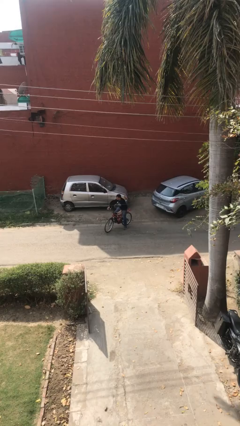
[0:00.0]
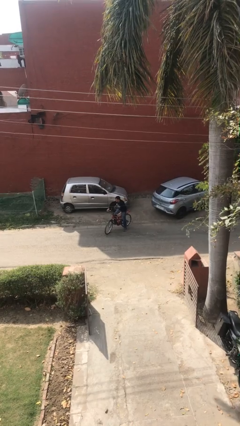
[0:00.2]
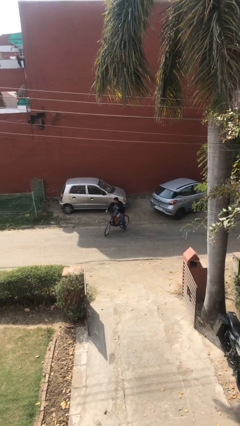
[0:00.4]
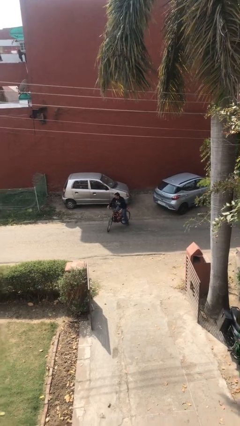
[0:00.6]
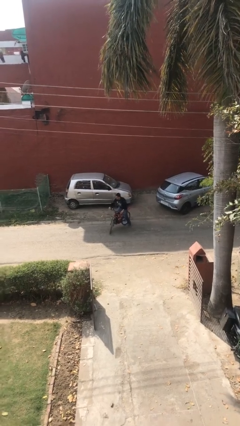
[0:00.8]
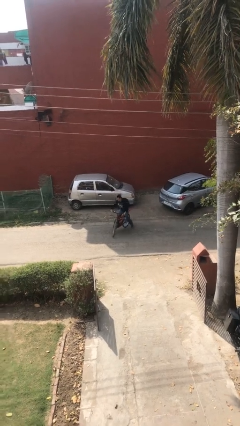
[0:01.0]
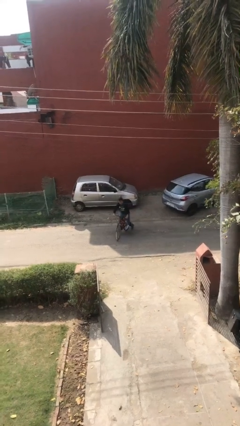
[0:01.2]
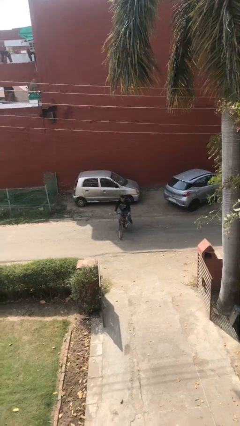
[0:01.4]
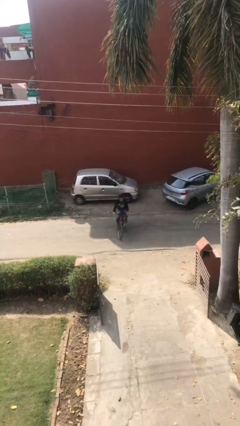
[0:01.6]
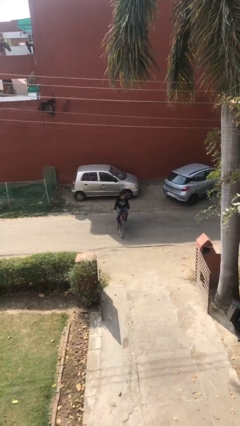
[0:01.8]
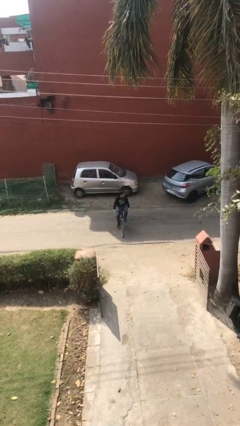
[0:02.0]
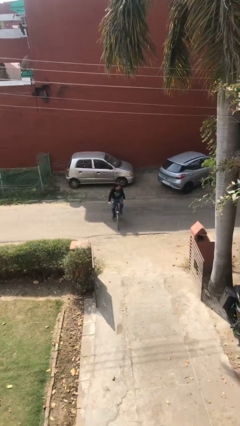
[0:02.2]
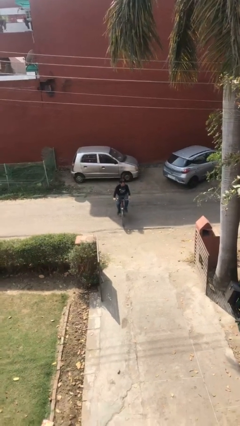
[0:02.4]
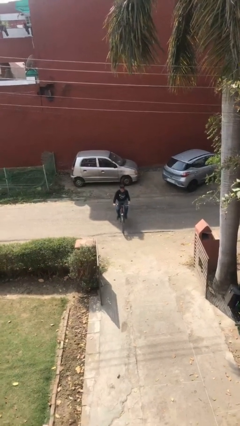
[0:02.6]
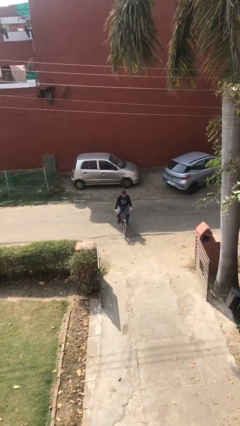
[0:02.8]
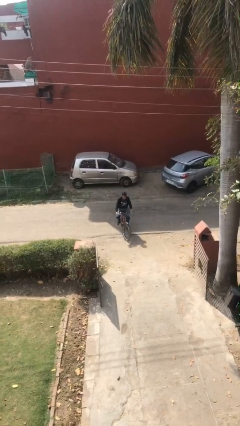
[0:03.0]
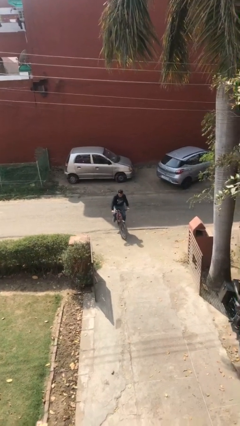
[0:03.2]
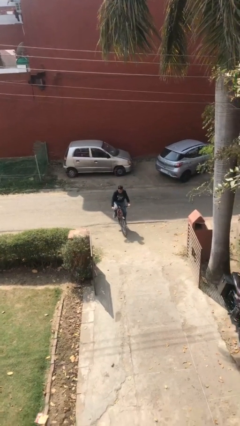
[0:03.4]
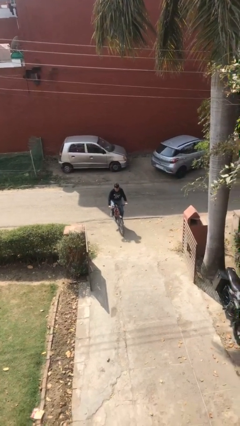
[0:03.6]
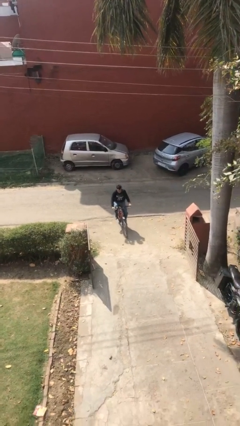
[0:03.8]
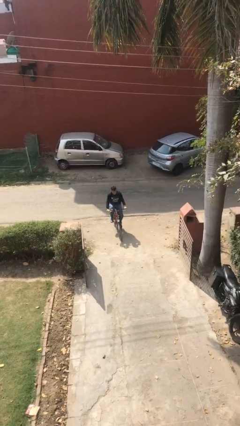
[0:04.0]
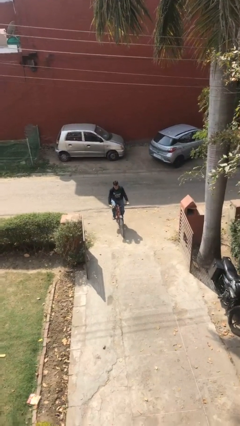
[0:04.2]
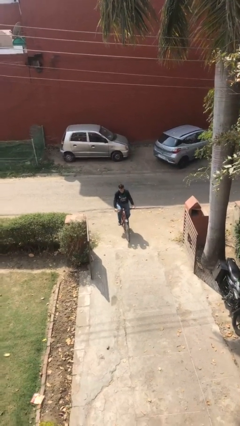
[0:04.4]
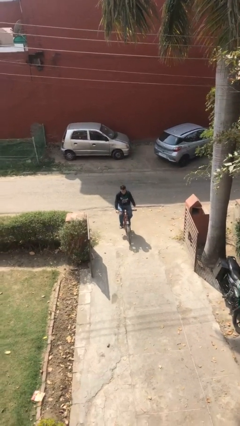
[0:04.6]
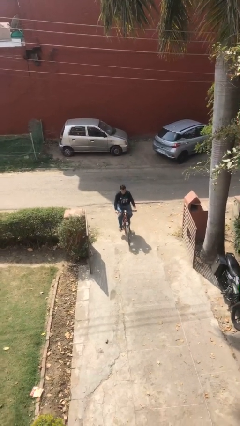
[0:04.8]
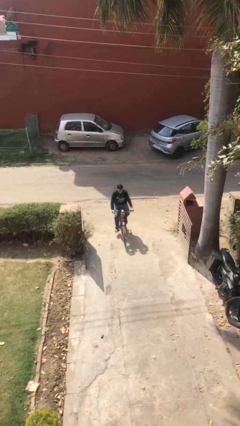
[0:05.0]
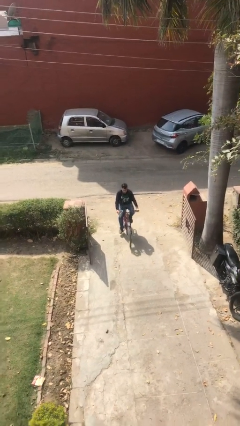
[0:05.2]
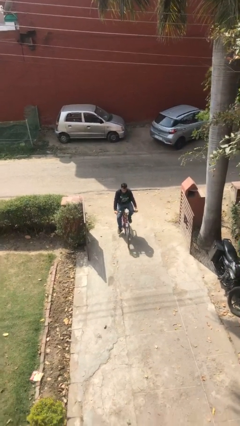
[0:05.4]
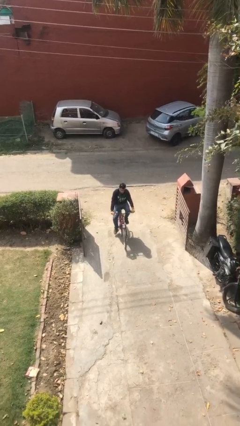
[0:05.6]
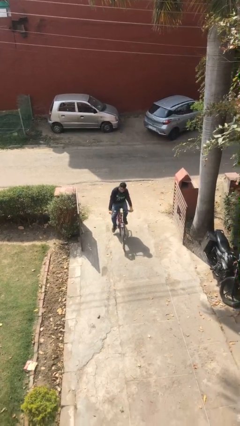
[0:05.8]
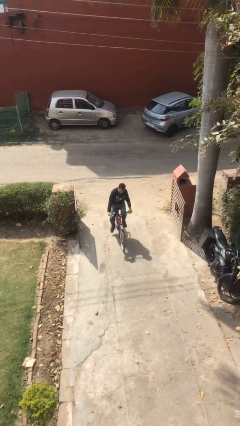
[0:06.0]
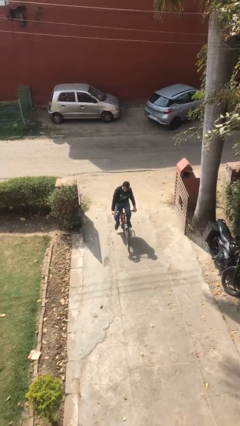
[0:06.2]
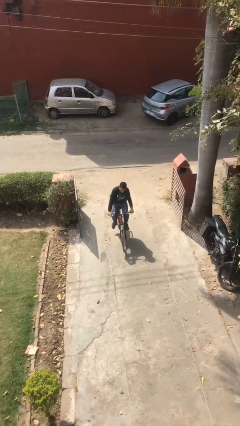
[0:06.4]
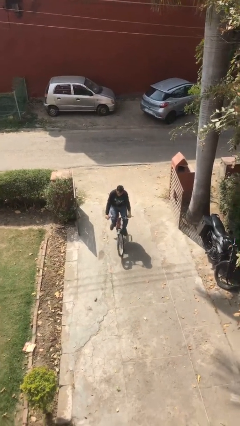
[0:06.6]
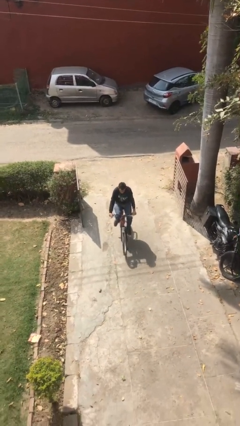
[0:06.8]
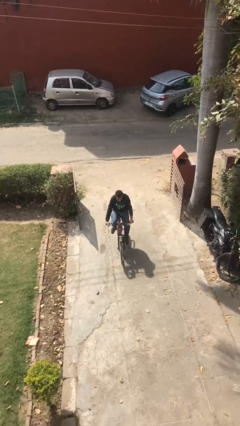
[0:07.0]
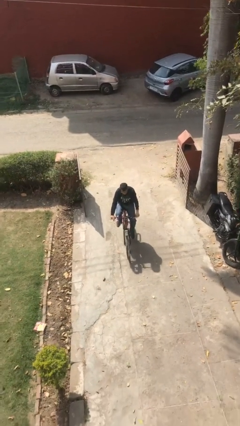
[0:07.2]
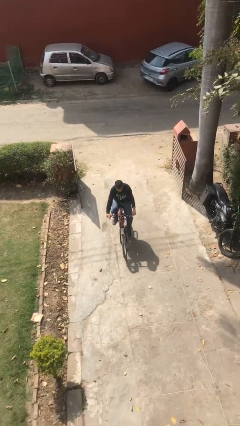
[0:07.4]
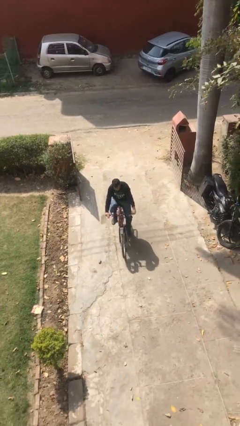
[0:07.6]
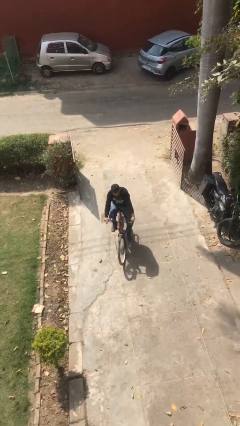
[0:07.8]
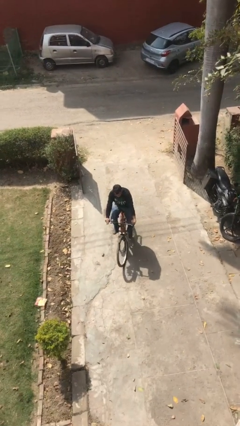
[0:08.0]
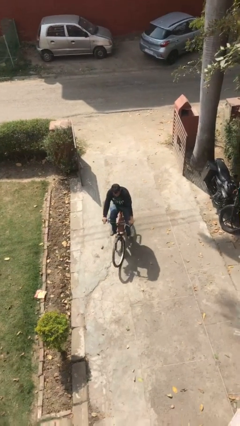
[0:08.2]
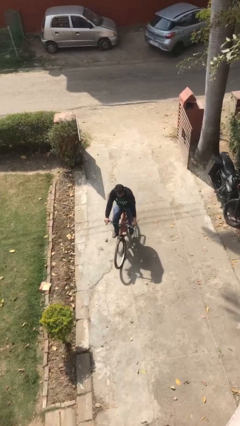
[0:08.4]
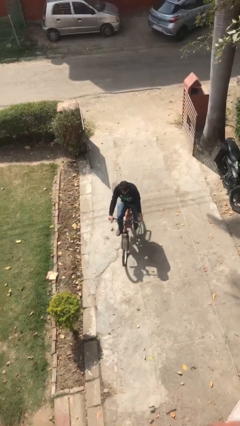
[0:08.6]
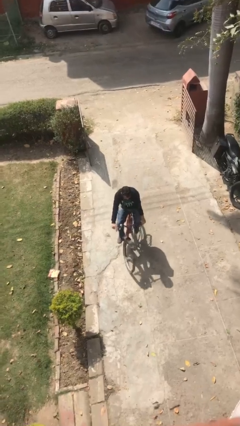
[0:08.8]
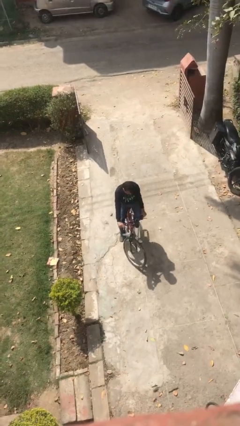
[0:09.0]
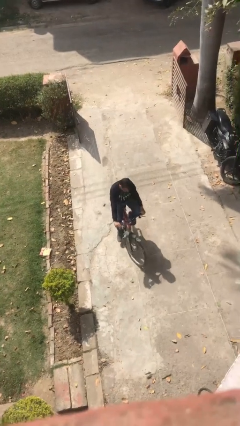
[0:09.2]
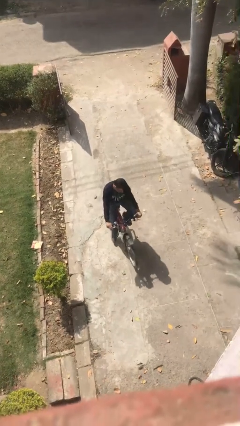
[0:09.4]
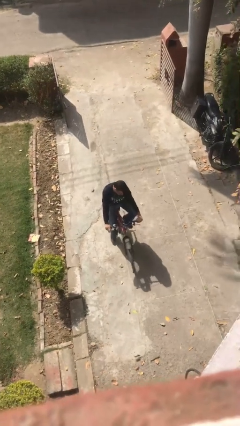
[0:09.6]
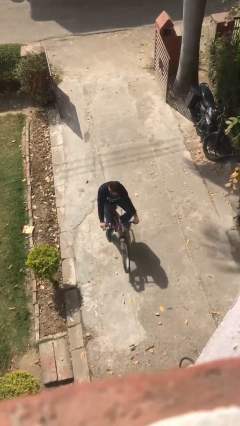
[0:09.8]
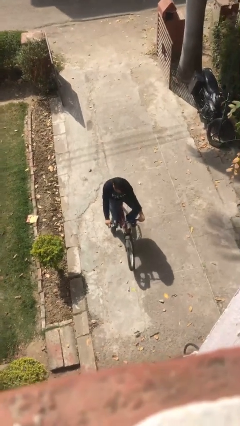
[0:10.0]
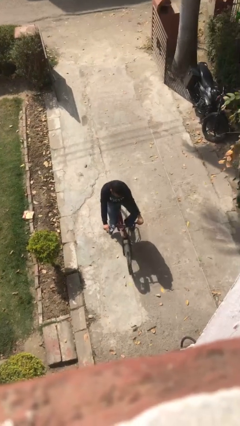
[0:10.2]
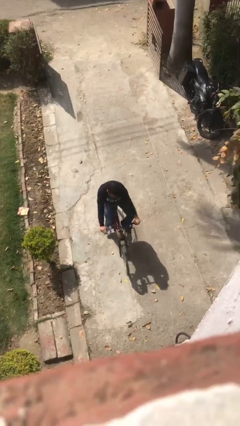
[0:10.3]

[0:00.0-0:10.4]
person rides bicycle

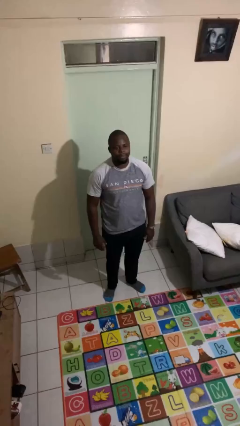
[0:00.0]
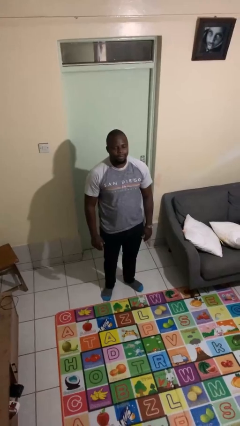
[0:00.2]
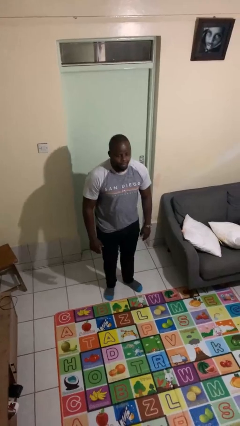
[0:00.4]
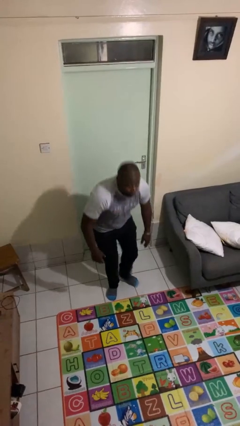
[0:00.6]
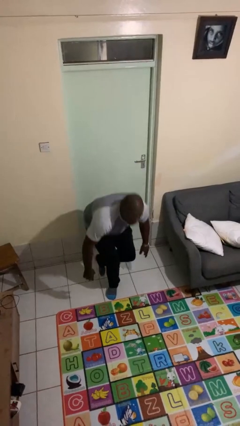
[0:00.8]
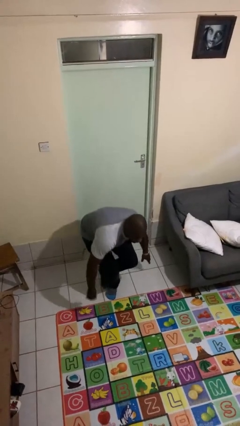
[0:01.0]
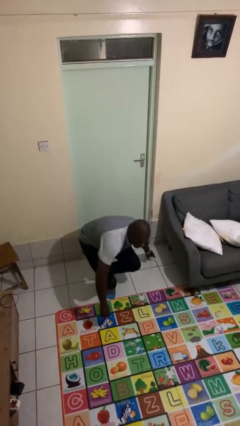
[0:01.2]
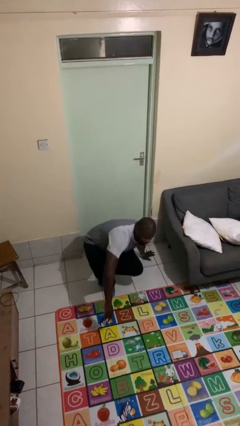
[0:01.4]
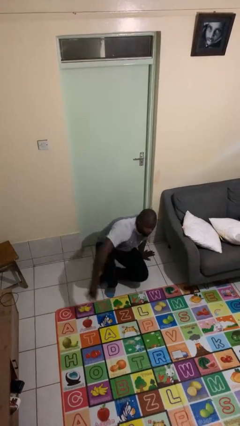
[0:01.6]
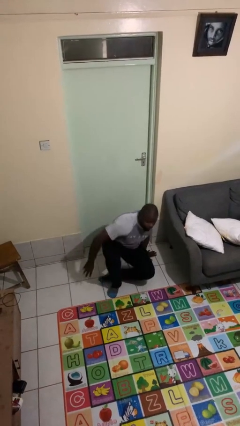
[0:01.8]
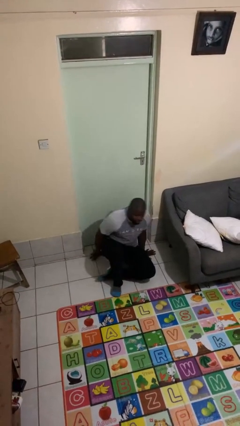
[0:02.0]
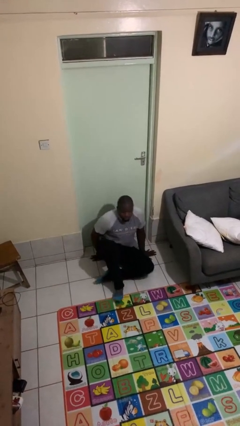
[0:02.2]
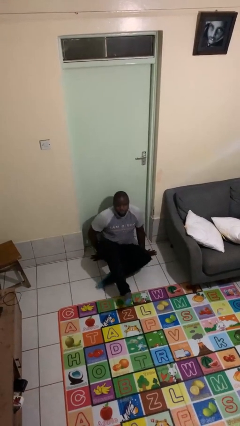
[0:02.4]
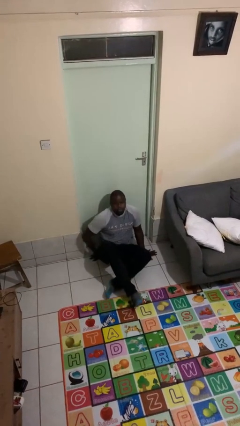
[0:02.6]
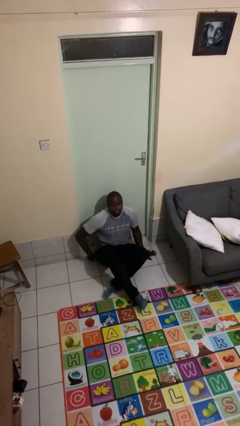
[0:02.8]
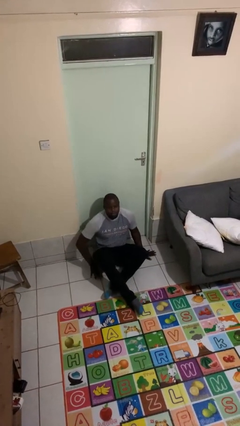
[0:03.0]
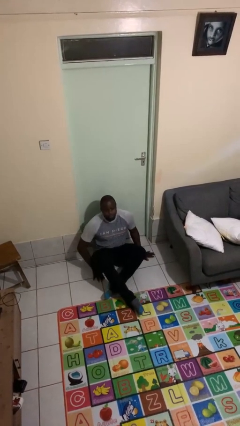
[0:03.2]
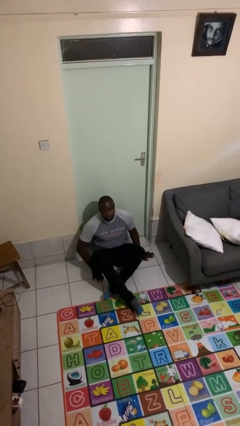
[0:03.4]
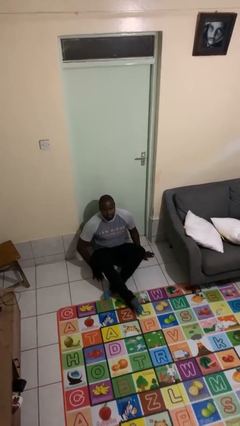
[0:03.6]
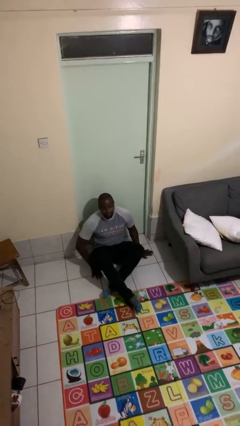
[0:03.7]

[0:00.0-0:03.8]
person sits crisscross

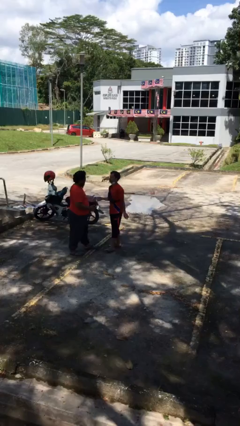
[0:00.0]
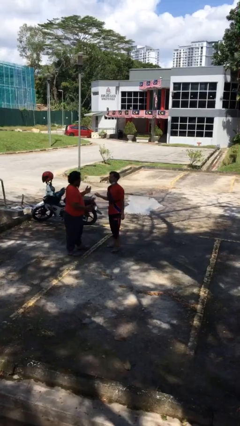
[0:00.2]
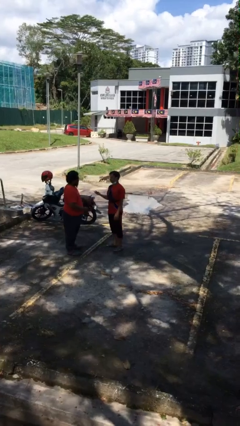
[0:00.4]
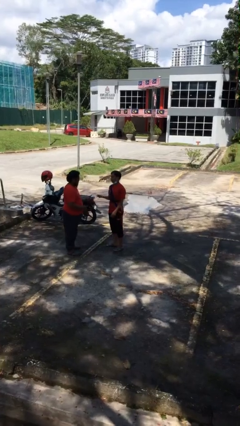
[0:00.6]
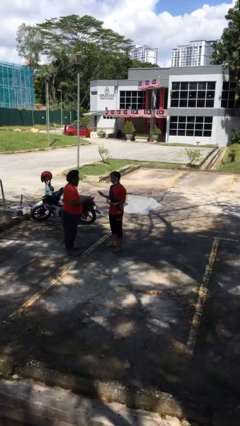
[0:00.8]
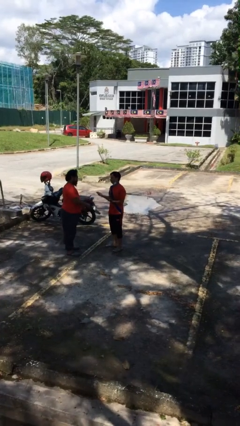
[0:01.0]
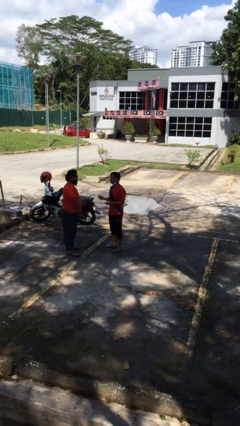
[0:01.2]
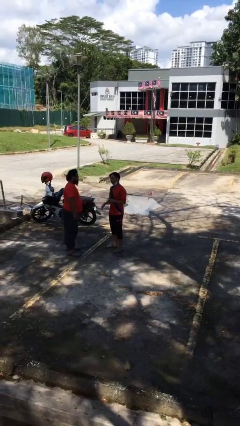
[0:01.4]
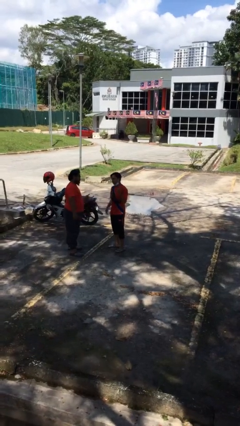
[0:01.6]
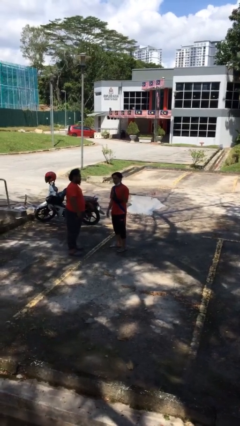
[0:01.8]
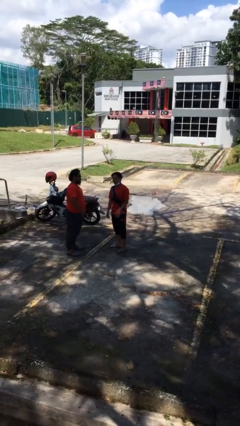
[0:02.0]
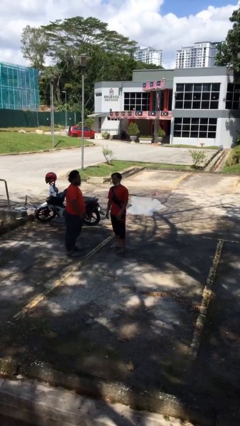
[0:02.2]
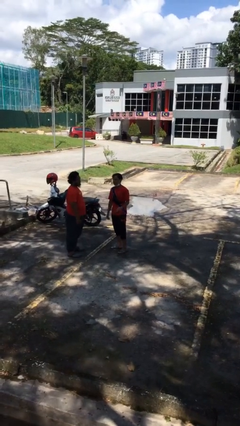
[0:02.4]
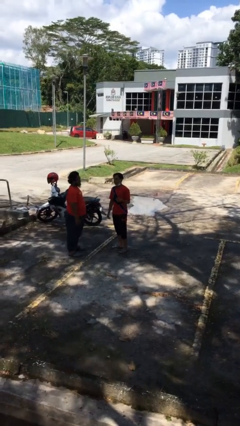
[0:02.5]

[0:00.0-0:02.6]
person talks to person

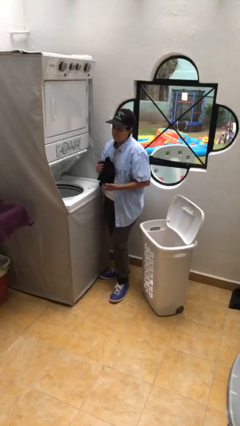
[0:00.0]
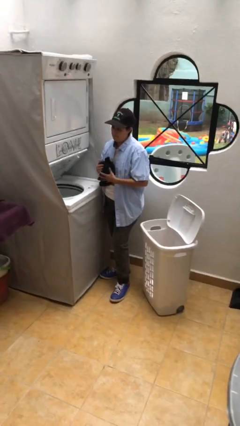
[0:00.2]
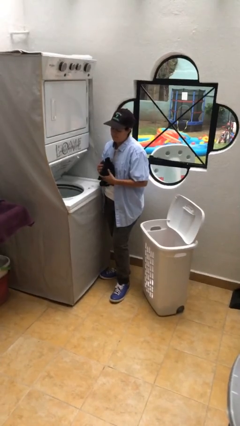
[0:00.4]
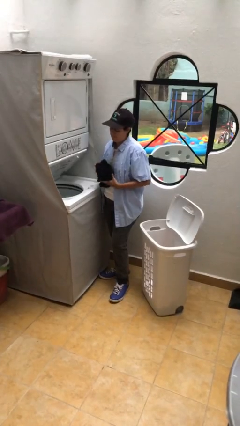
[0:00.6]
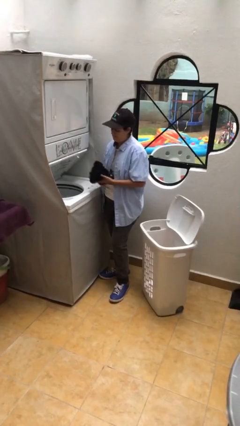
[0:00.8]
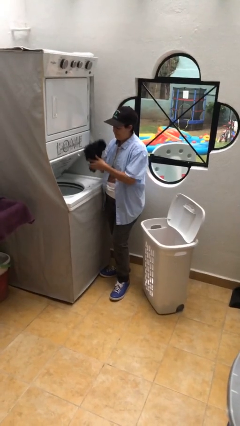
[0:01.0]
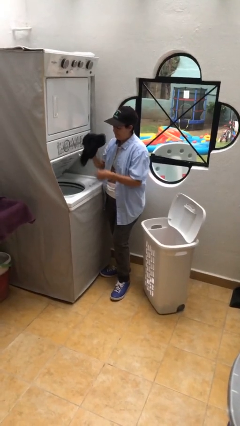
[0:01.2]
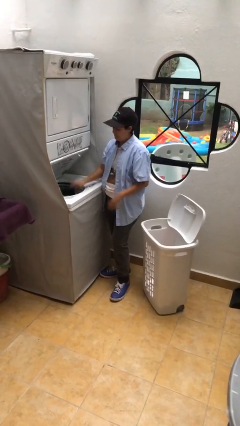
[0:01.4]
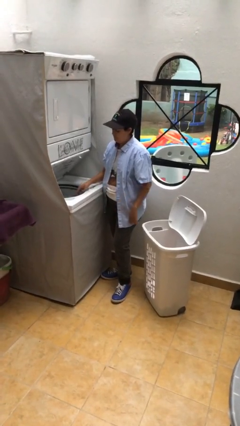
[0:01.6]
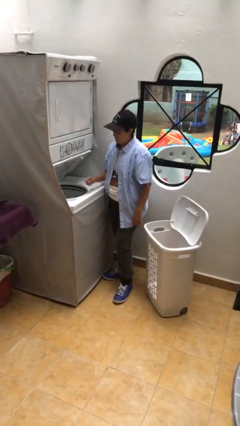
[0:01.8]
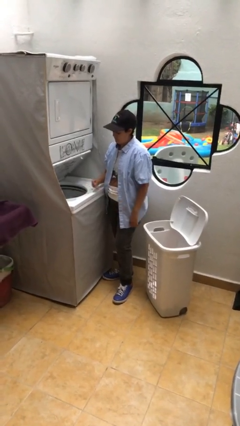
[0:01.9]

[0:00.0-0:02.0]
person loads clotheswasher
